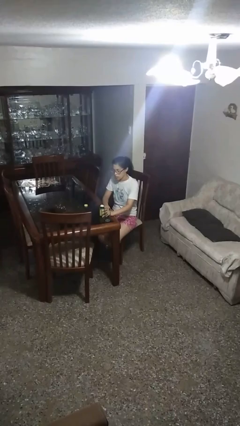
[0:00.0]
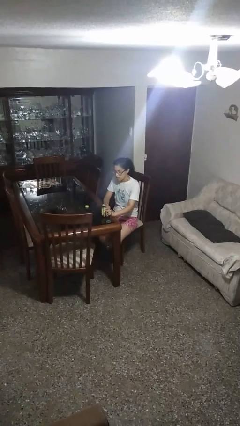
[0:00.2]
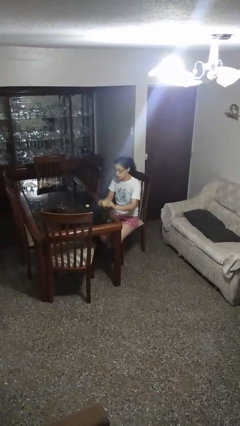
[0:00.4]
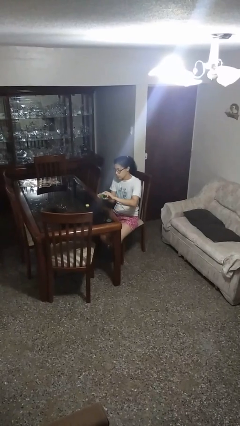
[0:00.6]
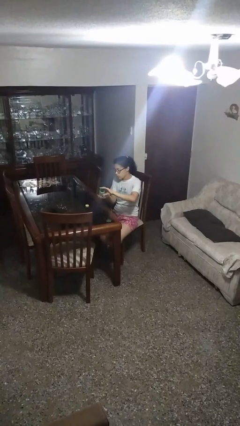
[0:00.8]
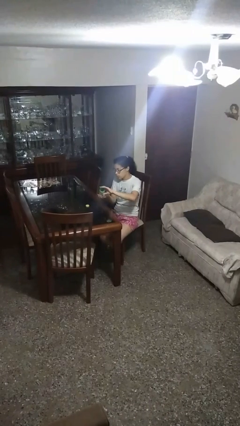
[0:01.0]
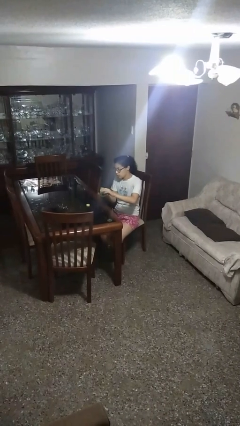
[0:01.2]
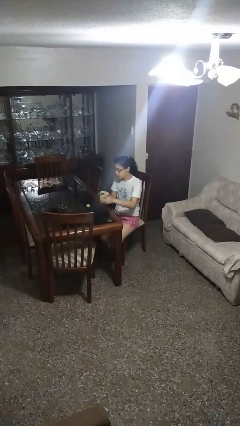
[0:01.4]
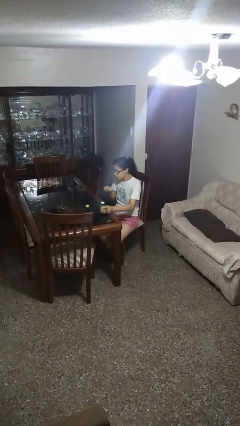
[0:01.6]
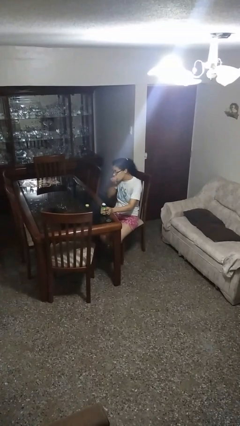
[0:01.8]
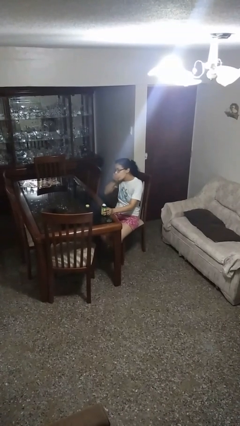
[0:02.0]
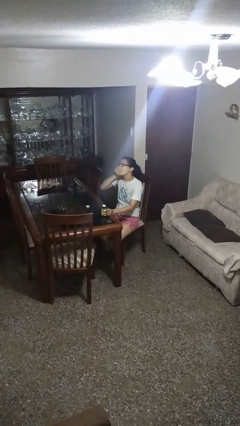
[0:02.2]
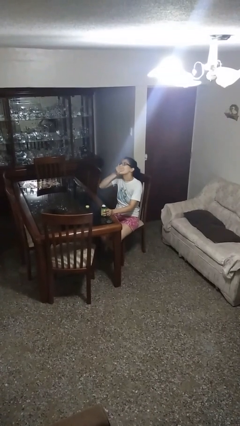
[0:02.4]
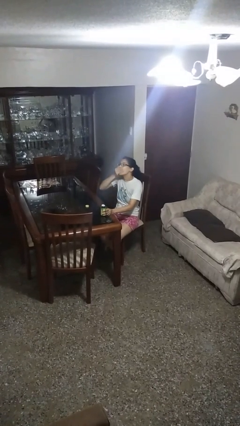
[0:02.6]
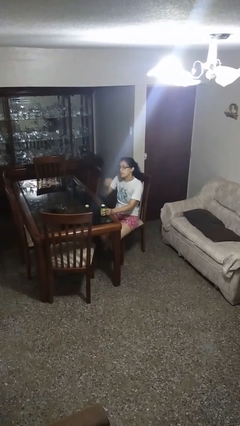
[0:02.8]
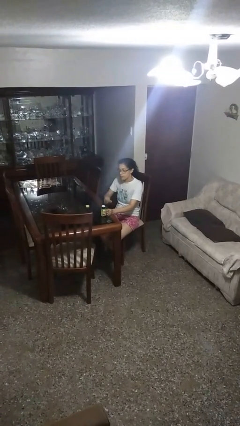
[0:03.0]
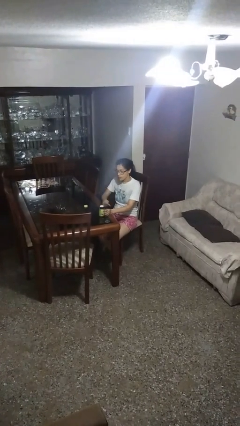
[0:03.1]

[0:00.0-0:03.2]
person takes medicine pills

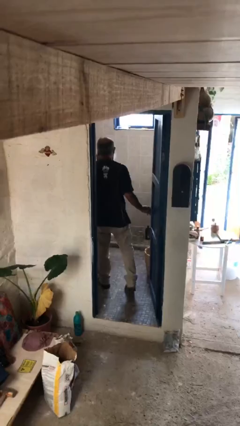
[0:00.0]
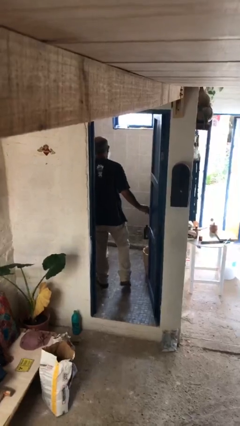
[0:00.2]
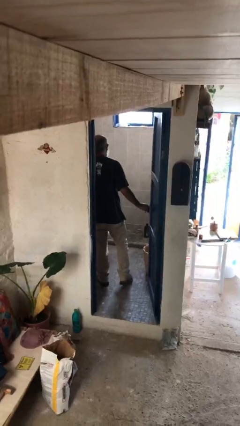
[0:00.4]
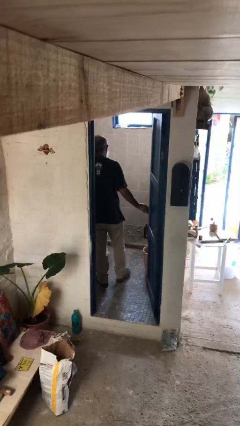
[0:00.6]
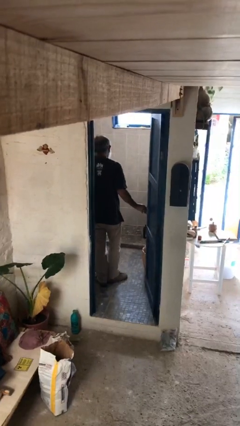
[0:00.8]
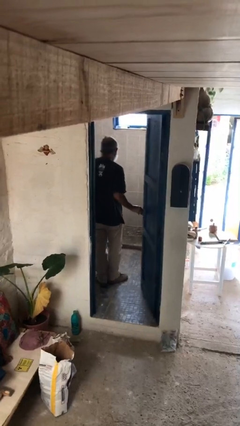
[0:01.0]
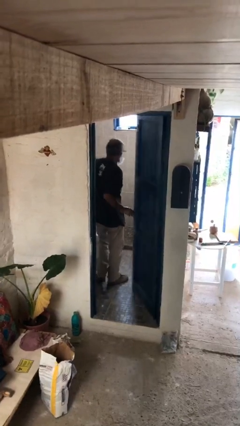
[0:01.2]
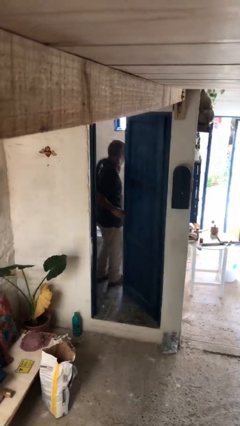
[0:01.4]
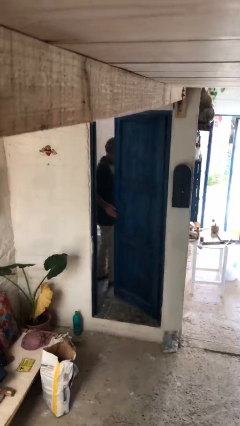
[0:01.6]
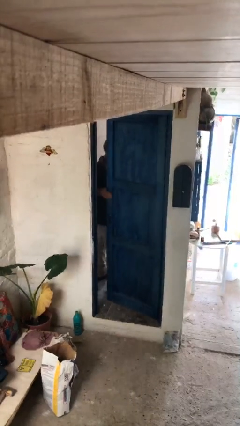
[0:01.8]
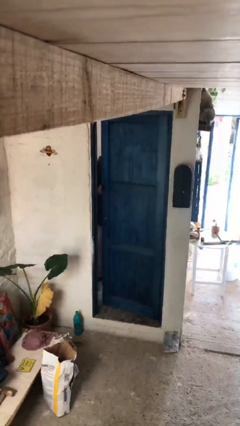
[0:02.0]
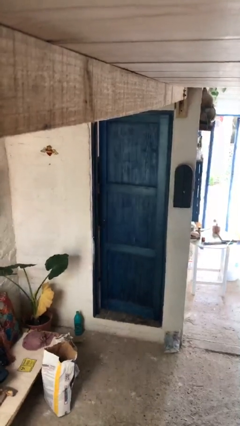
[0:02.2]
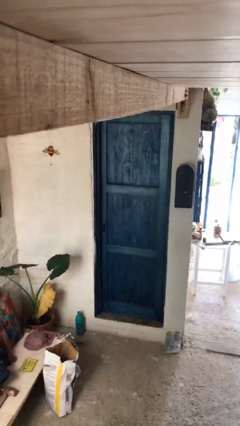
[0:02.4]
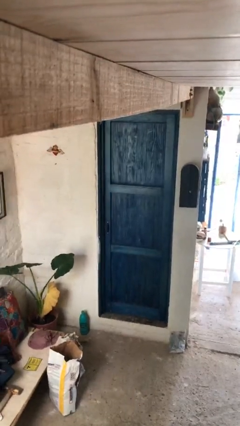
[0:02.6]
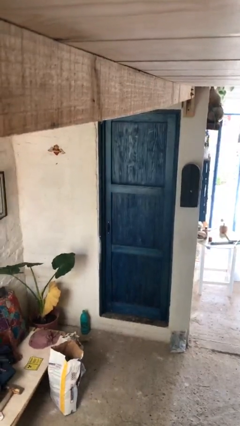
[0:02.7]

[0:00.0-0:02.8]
person closes facility door

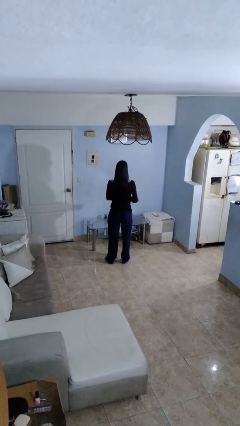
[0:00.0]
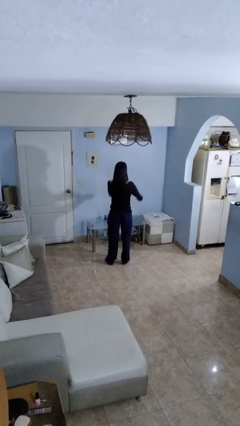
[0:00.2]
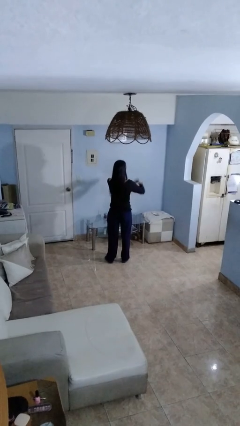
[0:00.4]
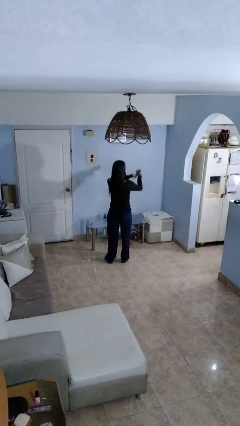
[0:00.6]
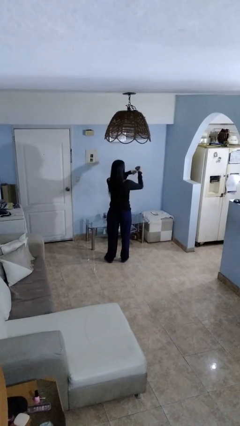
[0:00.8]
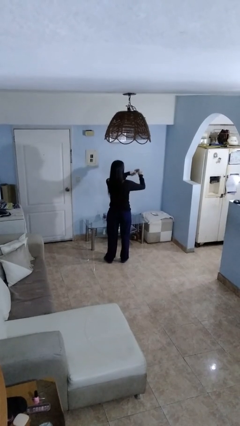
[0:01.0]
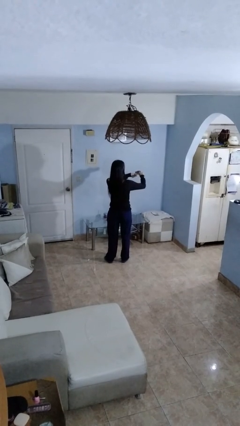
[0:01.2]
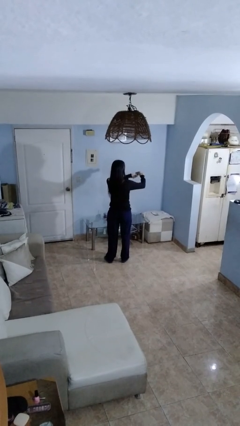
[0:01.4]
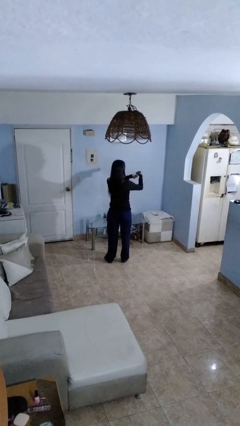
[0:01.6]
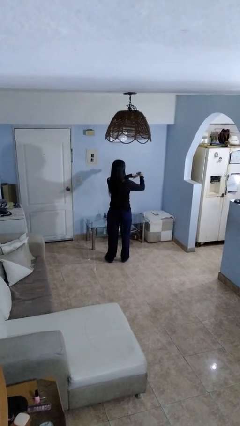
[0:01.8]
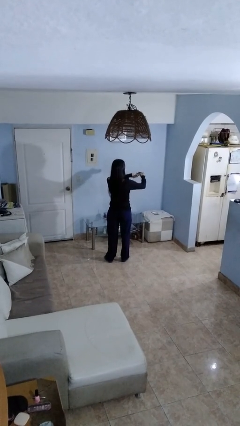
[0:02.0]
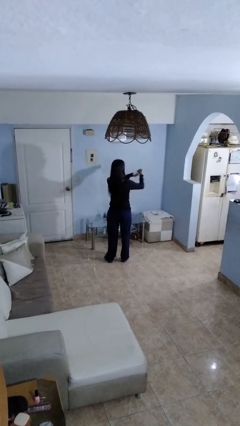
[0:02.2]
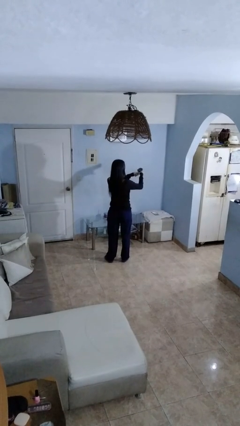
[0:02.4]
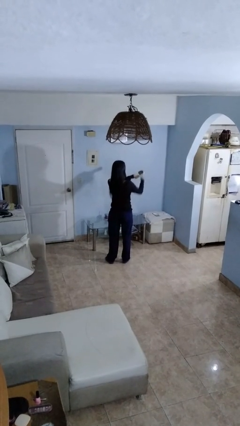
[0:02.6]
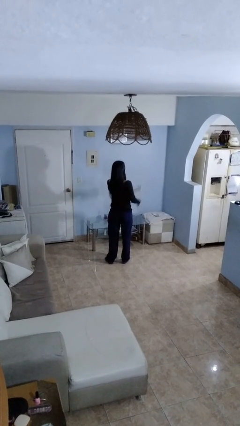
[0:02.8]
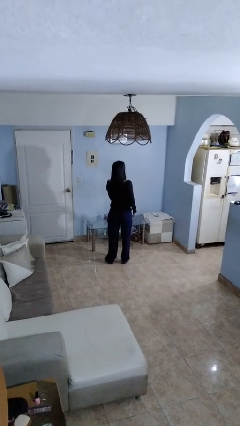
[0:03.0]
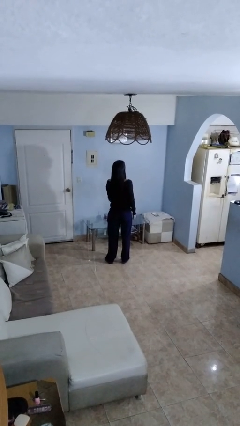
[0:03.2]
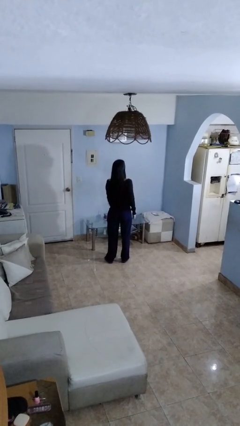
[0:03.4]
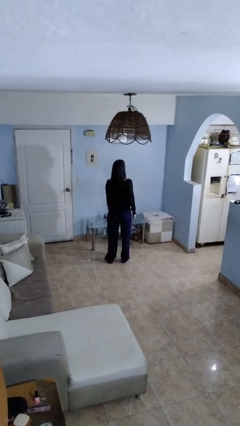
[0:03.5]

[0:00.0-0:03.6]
person opens can with can opener

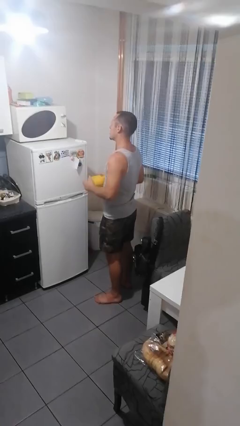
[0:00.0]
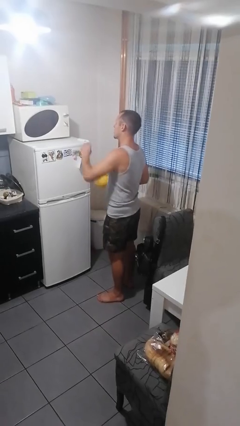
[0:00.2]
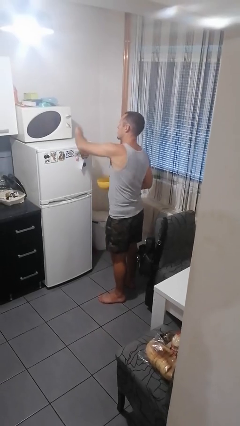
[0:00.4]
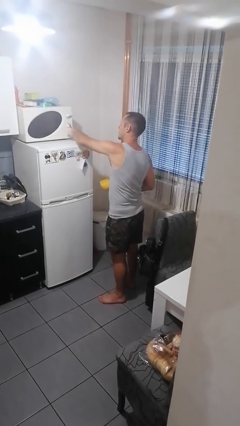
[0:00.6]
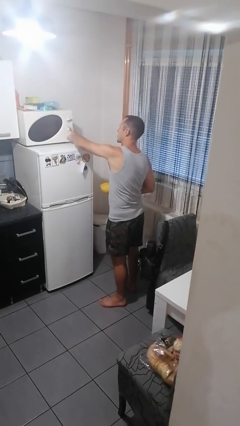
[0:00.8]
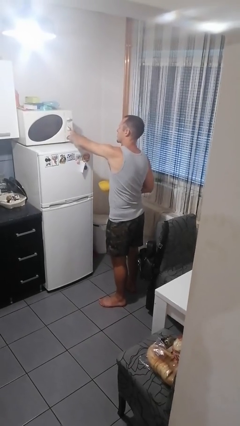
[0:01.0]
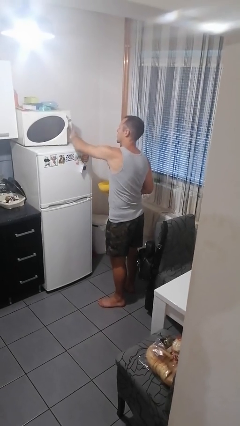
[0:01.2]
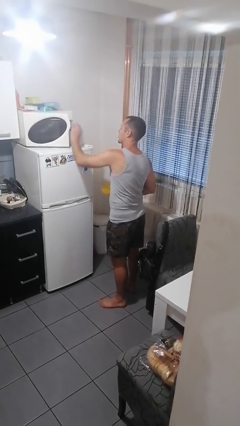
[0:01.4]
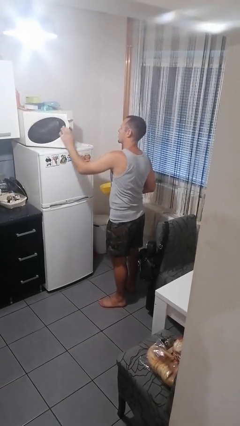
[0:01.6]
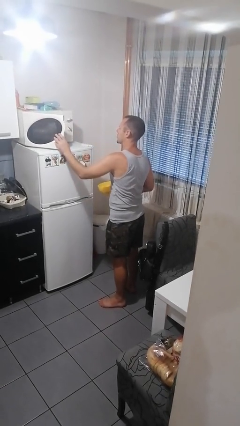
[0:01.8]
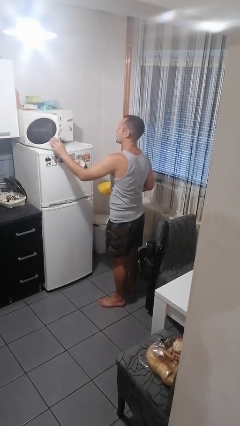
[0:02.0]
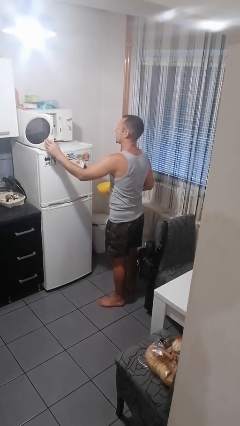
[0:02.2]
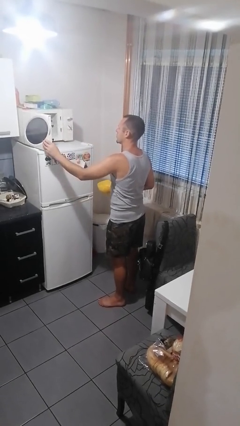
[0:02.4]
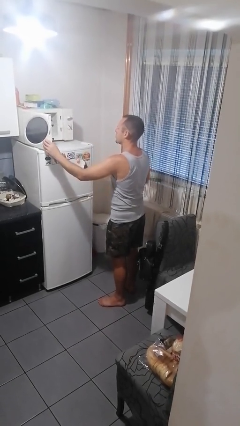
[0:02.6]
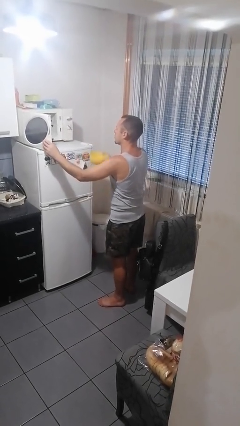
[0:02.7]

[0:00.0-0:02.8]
person opens microwave

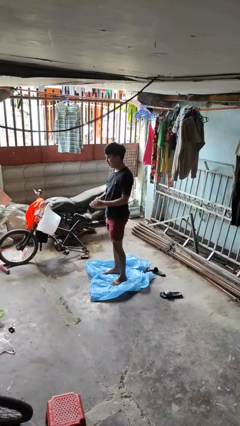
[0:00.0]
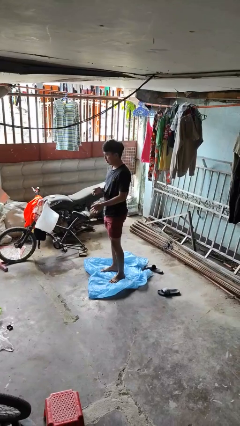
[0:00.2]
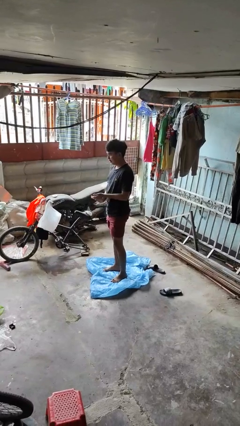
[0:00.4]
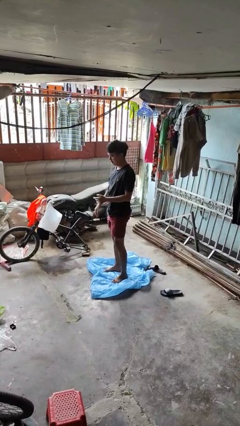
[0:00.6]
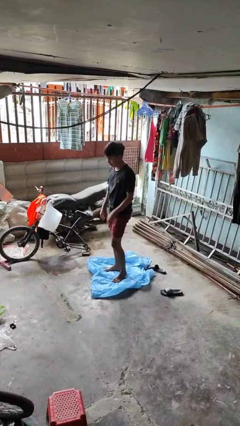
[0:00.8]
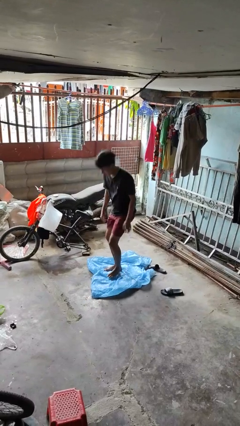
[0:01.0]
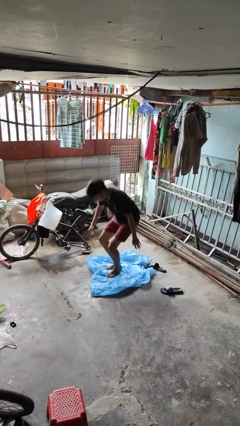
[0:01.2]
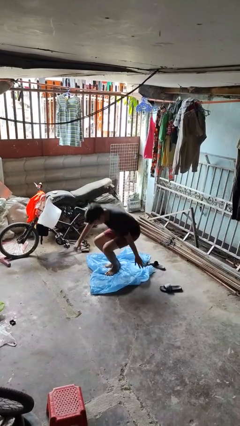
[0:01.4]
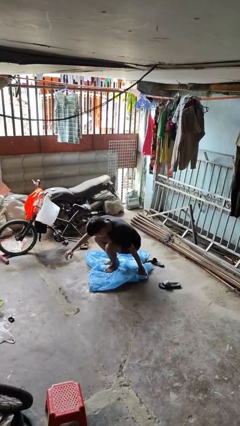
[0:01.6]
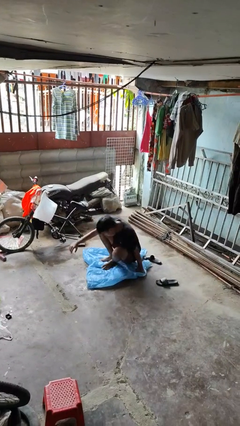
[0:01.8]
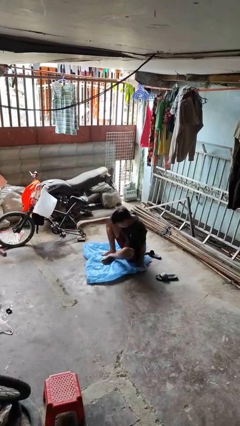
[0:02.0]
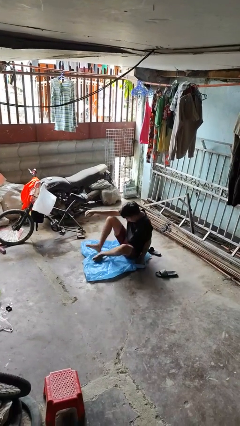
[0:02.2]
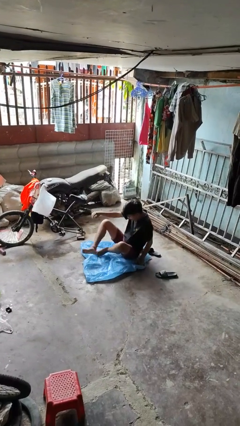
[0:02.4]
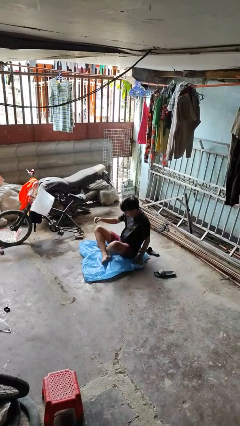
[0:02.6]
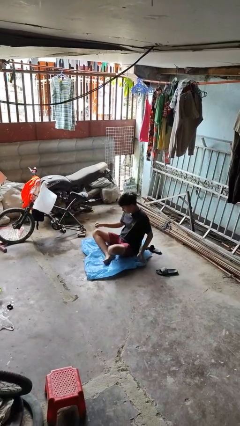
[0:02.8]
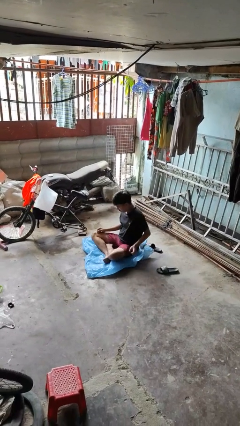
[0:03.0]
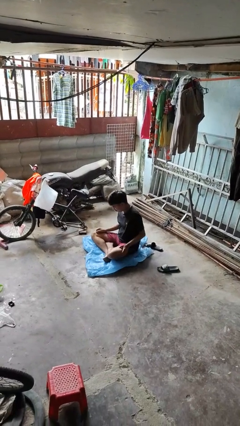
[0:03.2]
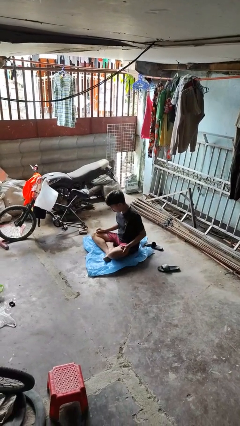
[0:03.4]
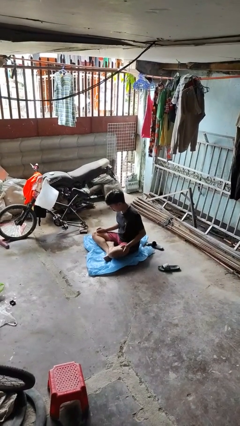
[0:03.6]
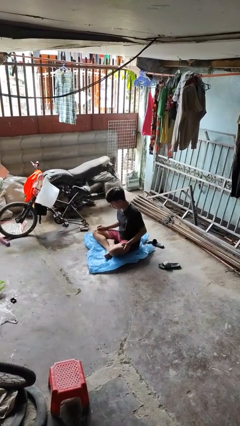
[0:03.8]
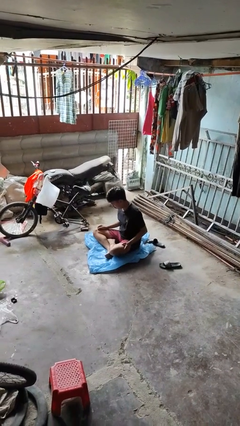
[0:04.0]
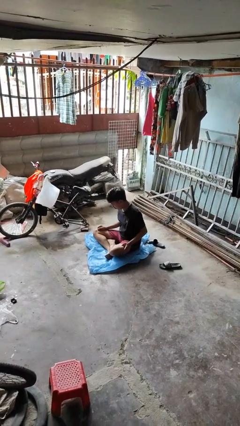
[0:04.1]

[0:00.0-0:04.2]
person sits crisscross

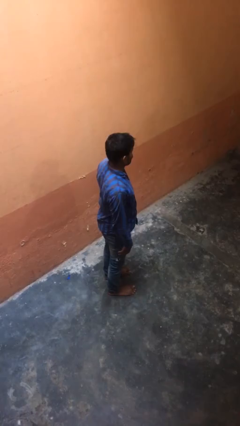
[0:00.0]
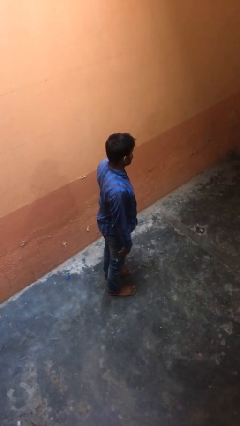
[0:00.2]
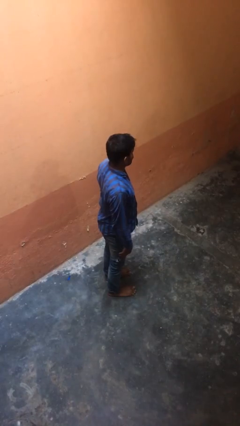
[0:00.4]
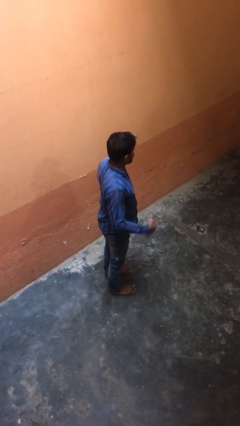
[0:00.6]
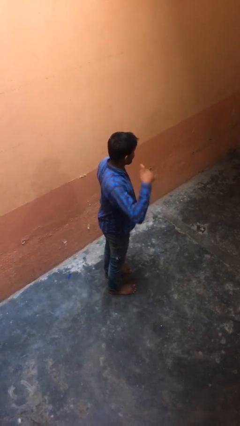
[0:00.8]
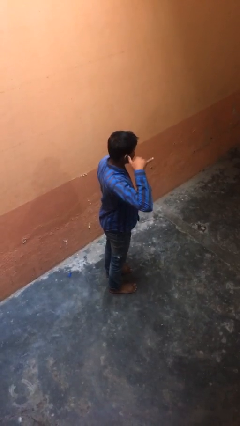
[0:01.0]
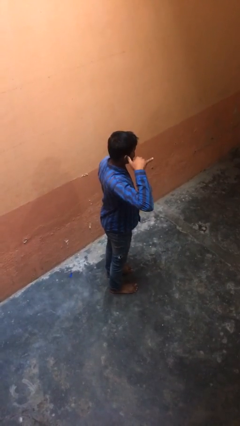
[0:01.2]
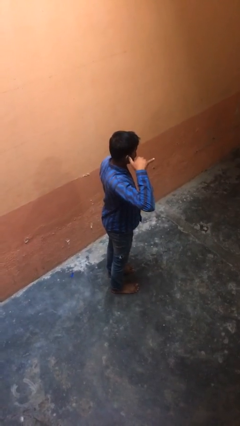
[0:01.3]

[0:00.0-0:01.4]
person gestures call me
